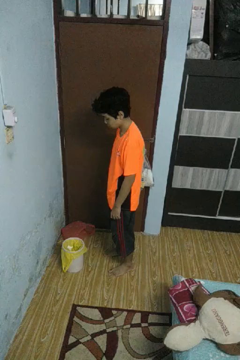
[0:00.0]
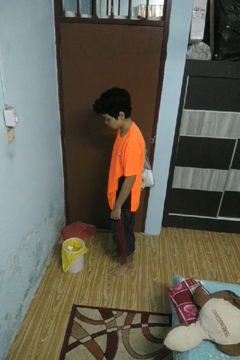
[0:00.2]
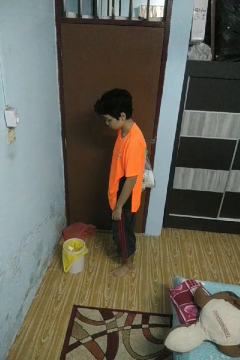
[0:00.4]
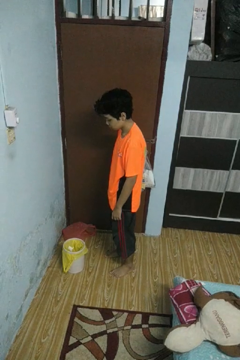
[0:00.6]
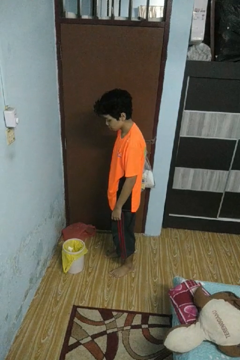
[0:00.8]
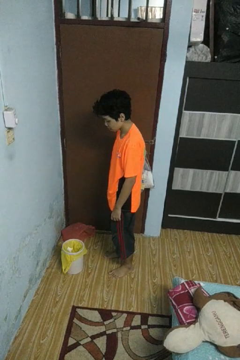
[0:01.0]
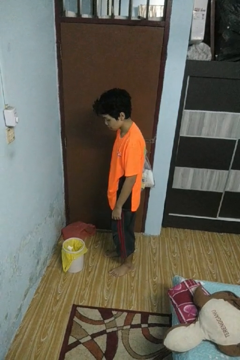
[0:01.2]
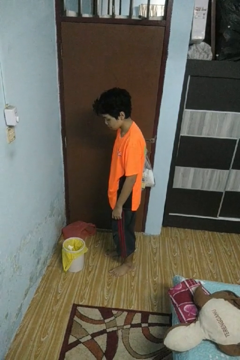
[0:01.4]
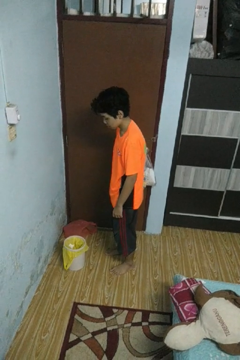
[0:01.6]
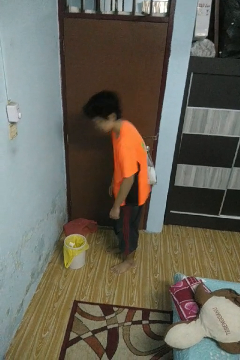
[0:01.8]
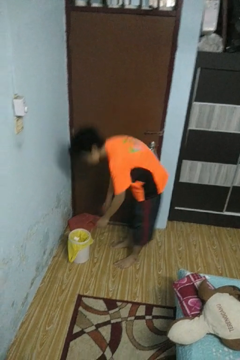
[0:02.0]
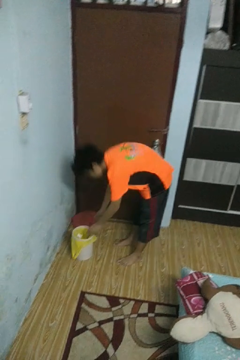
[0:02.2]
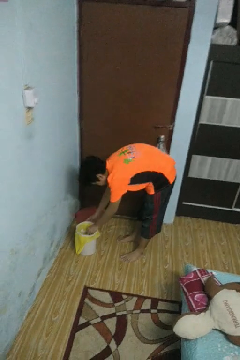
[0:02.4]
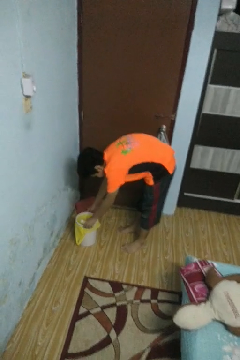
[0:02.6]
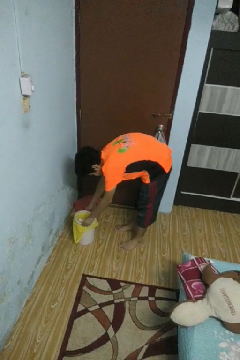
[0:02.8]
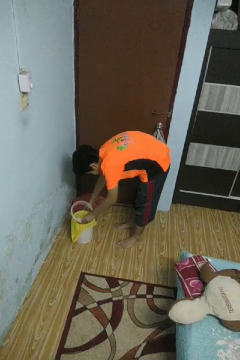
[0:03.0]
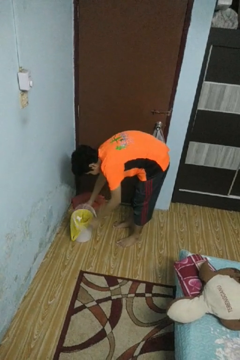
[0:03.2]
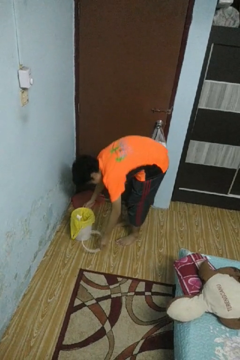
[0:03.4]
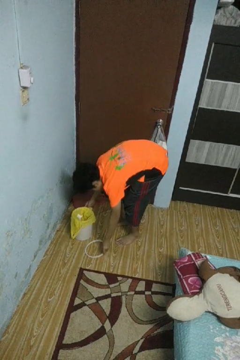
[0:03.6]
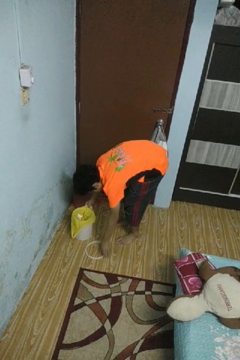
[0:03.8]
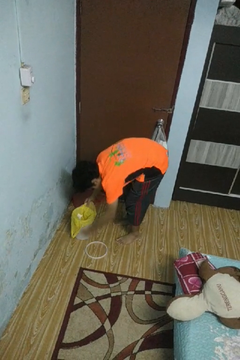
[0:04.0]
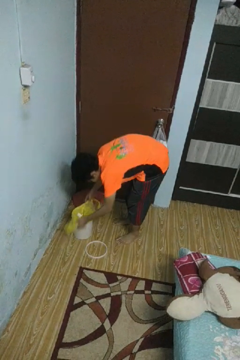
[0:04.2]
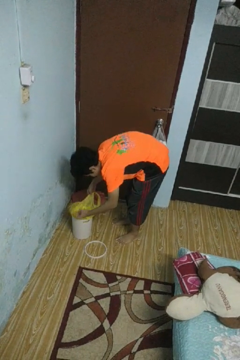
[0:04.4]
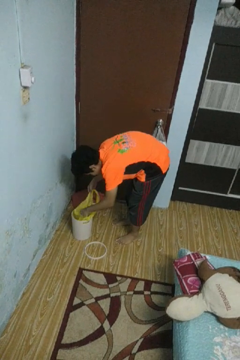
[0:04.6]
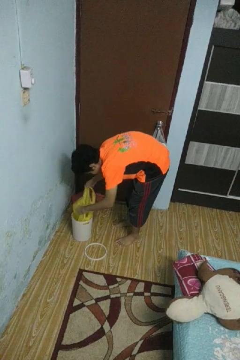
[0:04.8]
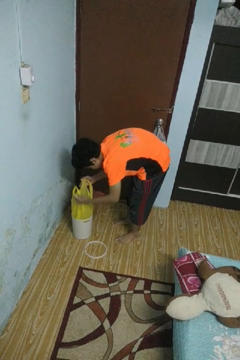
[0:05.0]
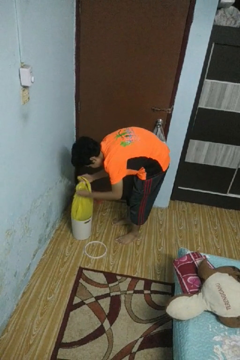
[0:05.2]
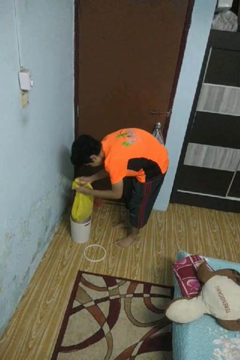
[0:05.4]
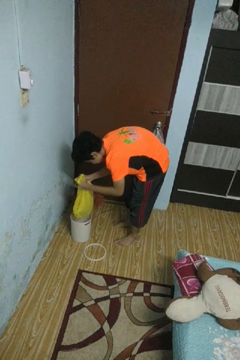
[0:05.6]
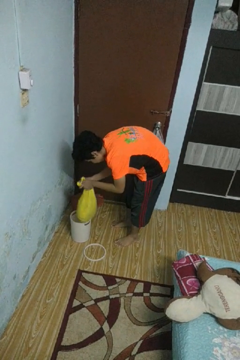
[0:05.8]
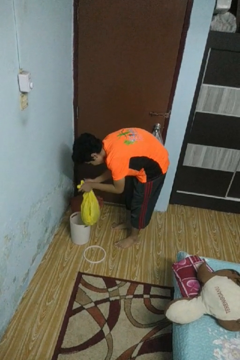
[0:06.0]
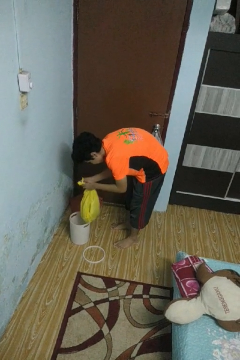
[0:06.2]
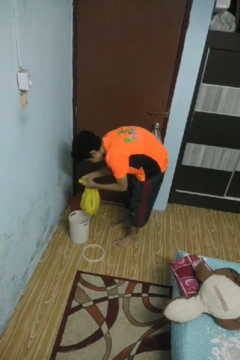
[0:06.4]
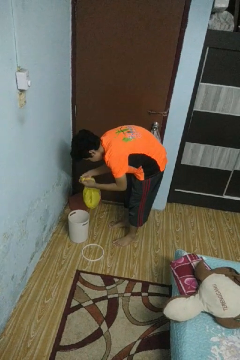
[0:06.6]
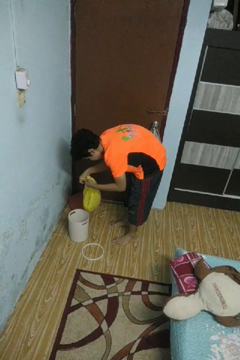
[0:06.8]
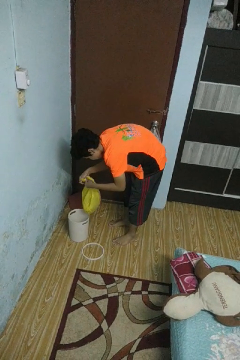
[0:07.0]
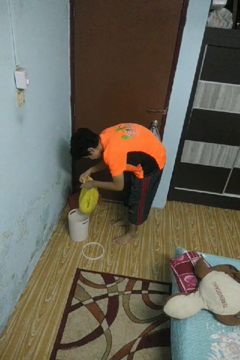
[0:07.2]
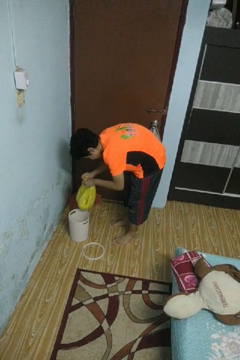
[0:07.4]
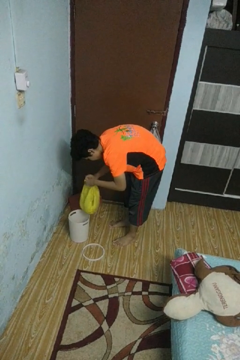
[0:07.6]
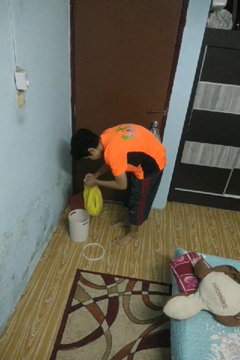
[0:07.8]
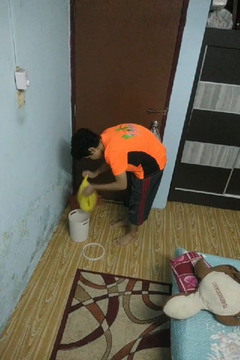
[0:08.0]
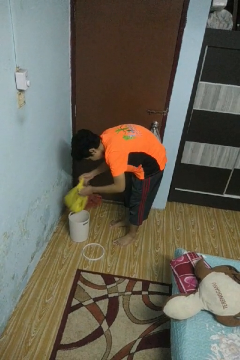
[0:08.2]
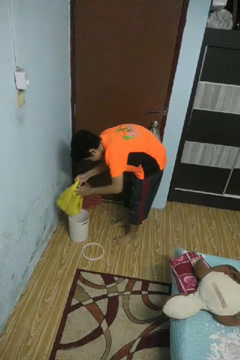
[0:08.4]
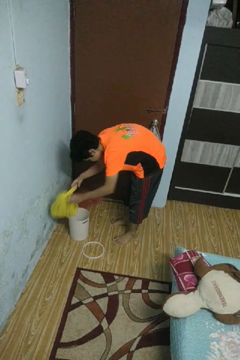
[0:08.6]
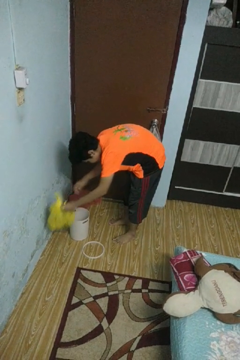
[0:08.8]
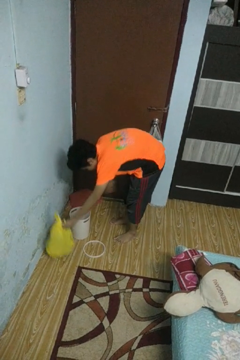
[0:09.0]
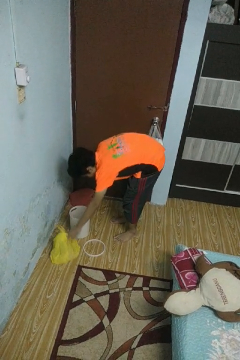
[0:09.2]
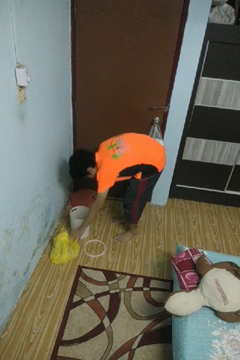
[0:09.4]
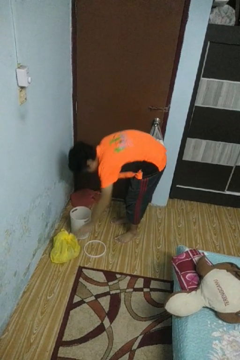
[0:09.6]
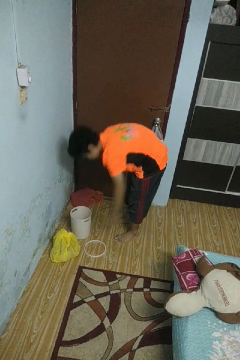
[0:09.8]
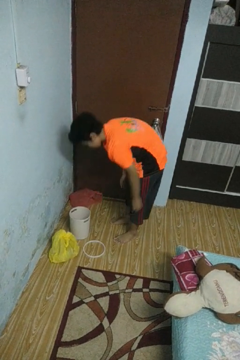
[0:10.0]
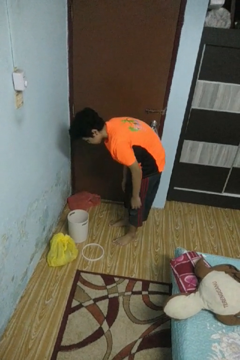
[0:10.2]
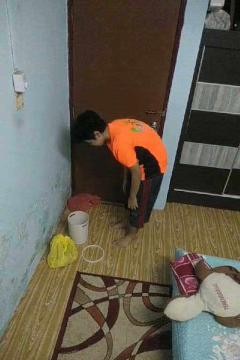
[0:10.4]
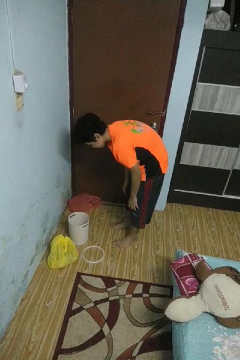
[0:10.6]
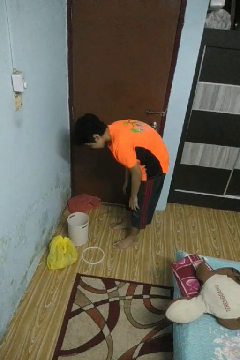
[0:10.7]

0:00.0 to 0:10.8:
person removes trashbag from trashcan

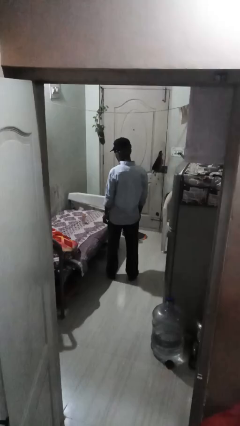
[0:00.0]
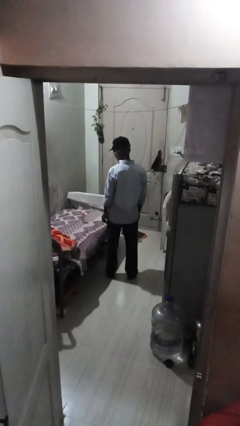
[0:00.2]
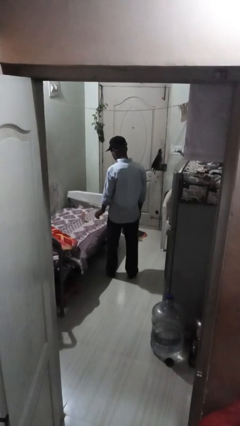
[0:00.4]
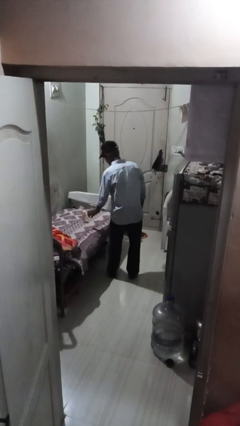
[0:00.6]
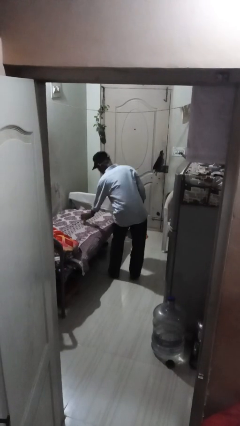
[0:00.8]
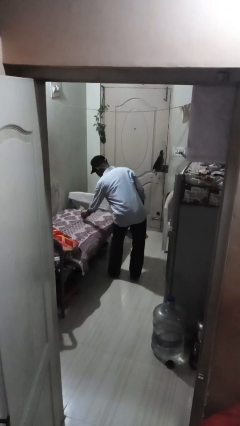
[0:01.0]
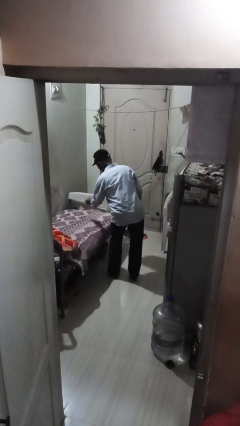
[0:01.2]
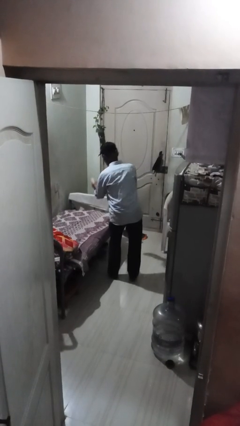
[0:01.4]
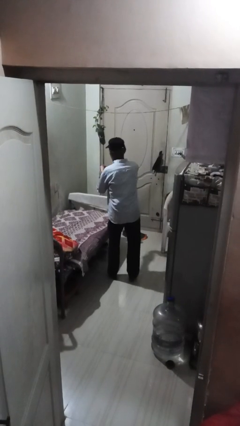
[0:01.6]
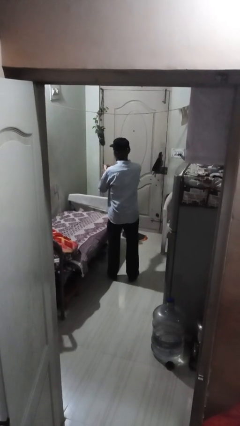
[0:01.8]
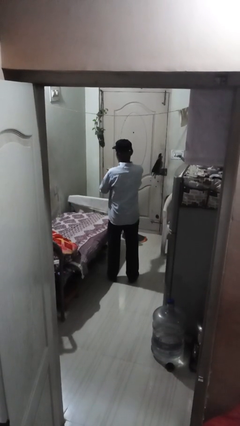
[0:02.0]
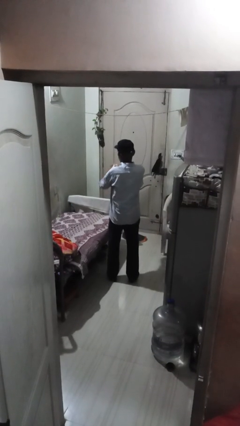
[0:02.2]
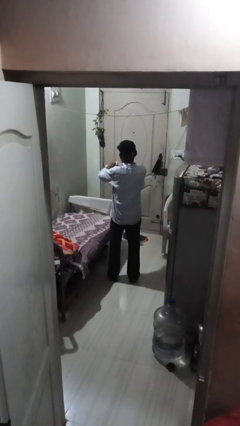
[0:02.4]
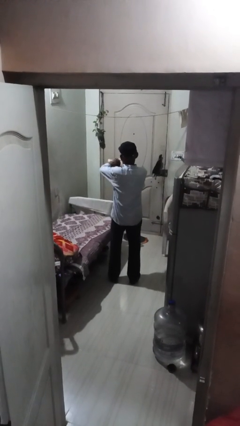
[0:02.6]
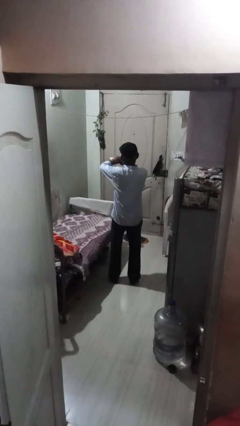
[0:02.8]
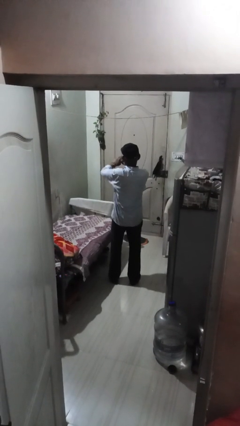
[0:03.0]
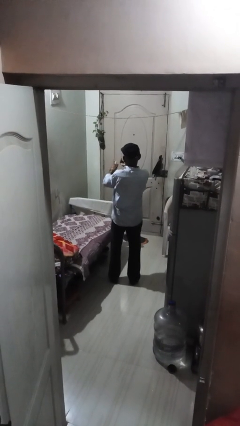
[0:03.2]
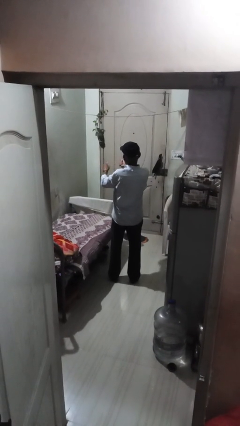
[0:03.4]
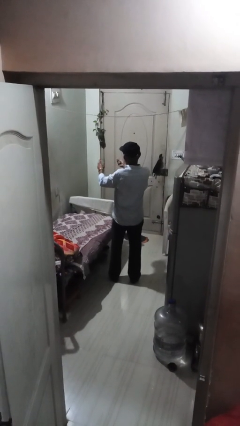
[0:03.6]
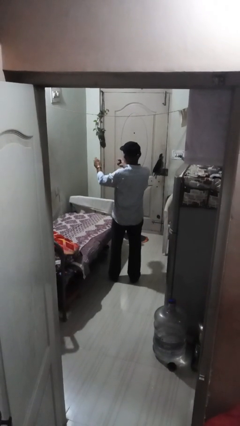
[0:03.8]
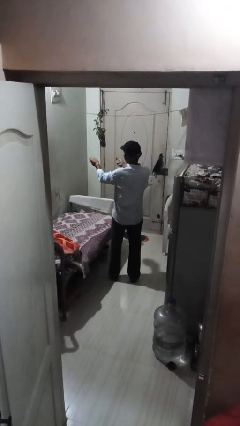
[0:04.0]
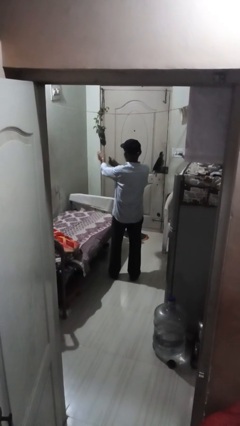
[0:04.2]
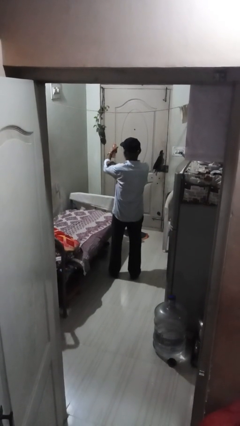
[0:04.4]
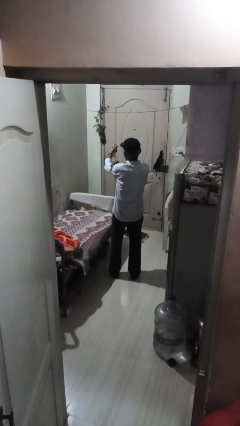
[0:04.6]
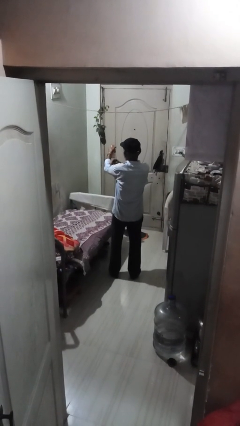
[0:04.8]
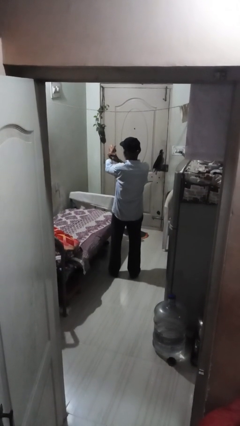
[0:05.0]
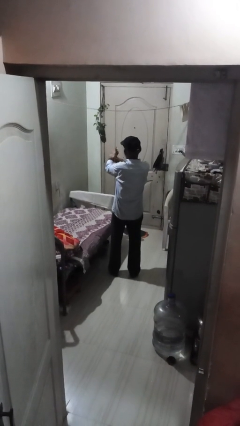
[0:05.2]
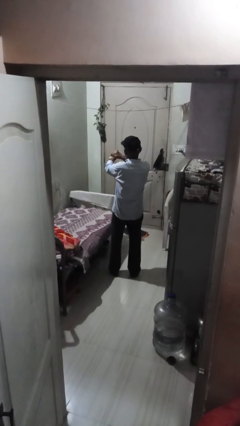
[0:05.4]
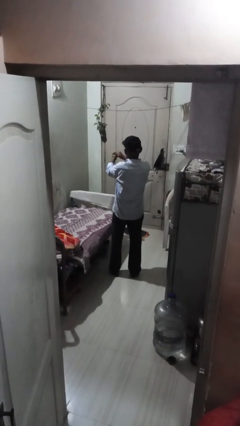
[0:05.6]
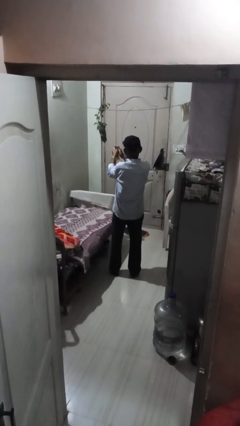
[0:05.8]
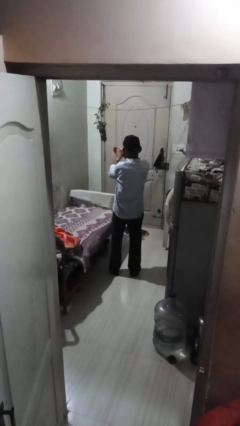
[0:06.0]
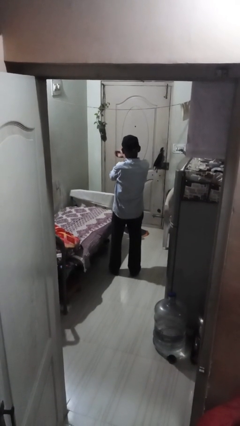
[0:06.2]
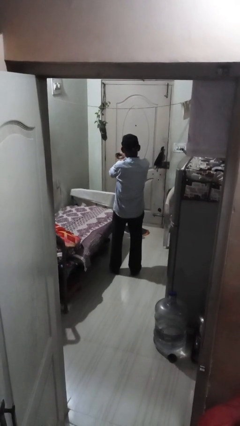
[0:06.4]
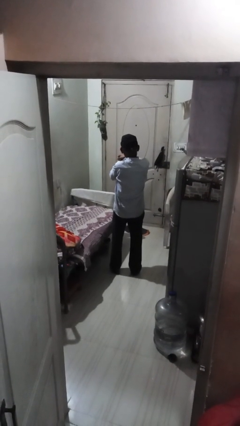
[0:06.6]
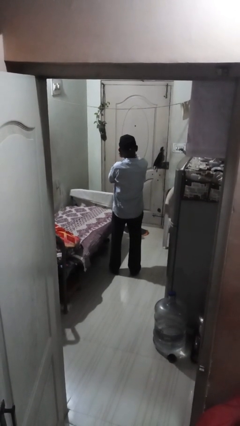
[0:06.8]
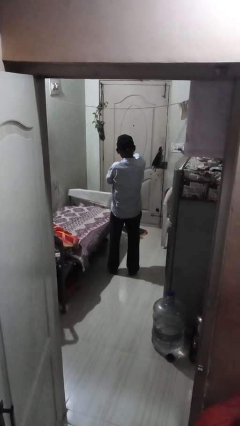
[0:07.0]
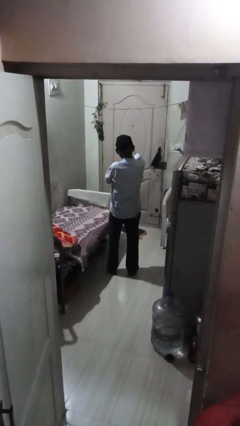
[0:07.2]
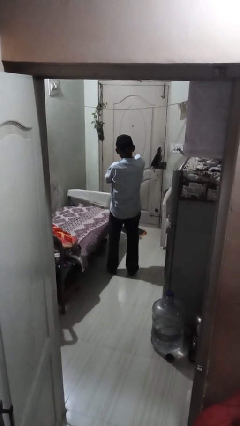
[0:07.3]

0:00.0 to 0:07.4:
person applies facial moisturizer

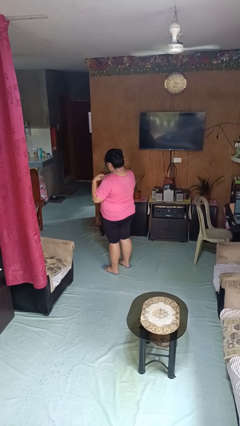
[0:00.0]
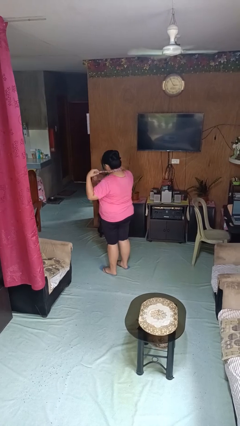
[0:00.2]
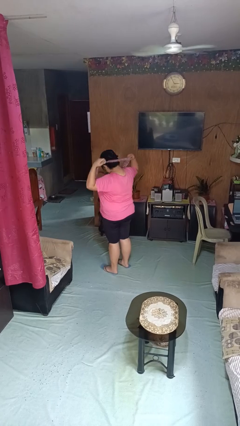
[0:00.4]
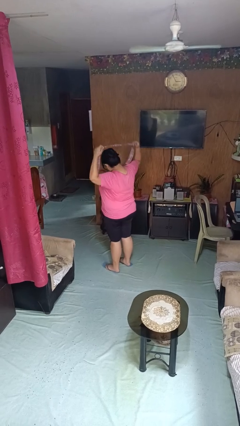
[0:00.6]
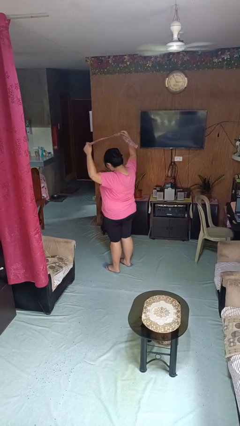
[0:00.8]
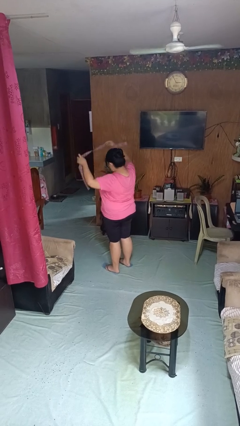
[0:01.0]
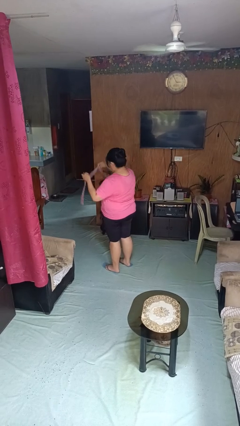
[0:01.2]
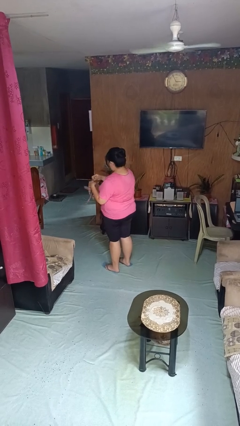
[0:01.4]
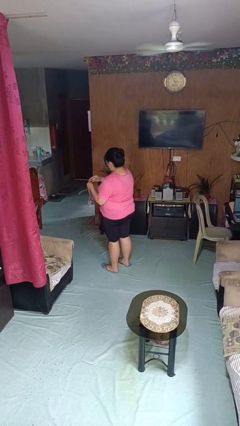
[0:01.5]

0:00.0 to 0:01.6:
person takes off necktie
